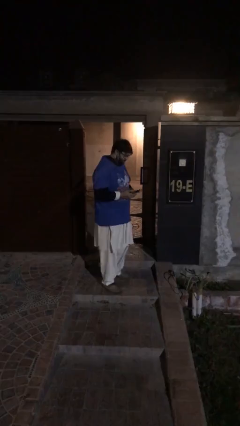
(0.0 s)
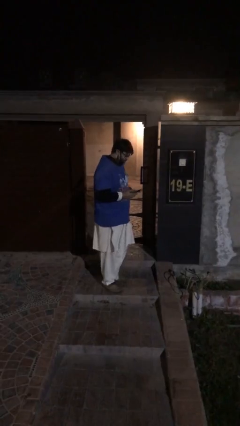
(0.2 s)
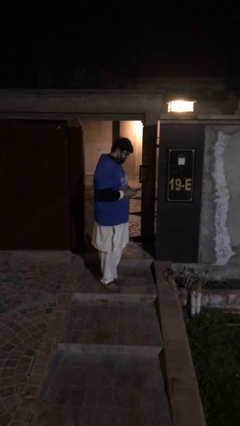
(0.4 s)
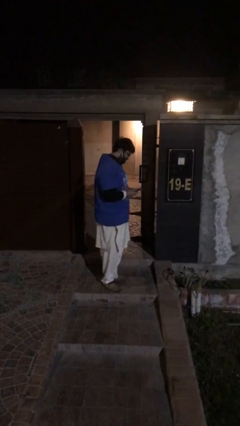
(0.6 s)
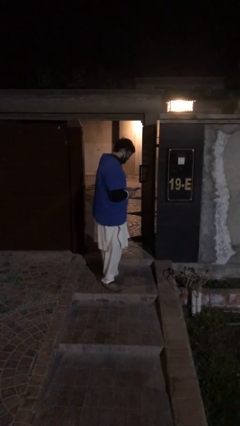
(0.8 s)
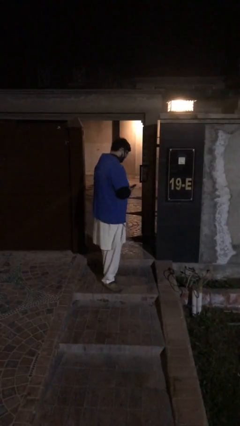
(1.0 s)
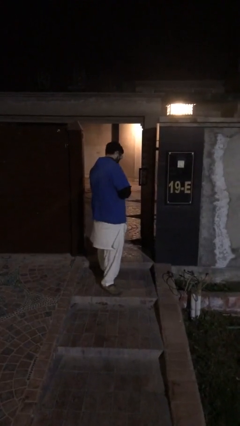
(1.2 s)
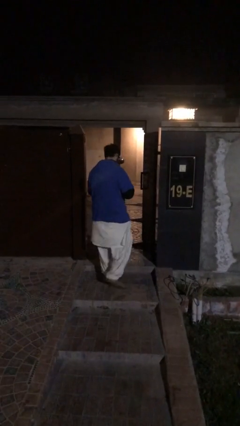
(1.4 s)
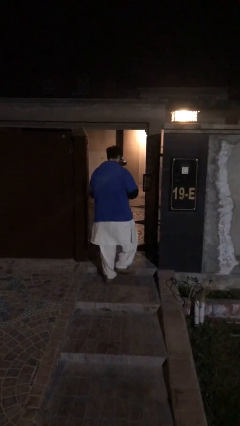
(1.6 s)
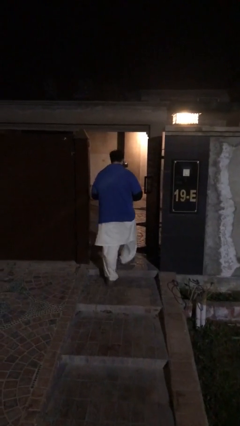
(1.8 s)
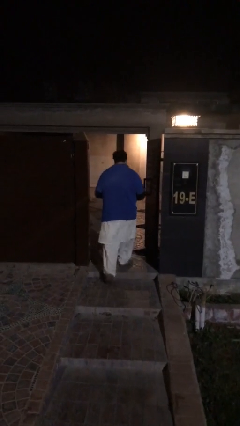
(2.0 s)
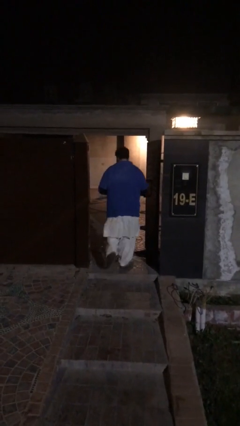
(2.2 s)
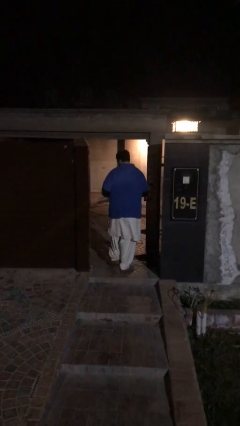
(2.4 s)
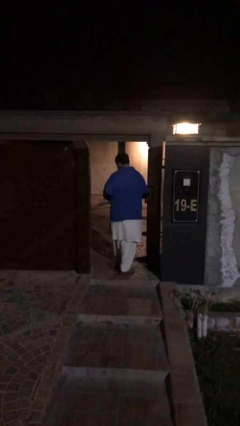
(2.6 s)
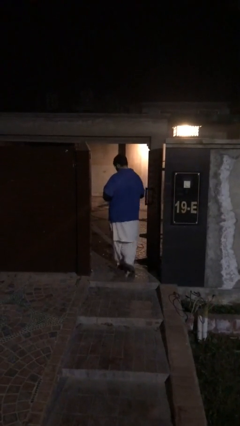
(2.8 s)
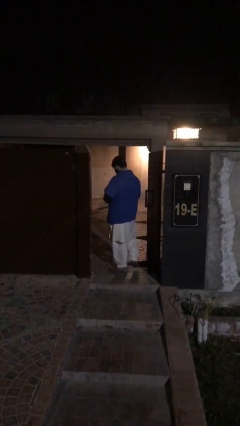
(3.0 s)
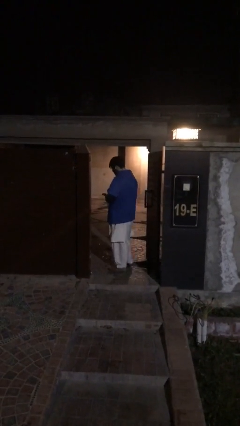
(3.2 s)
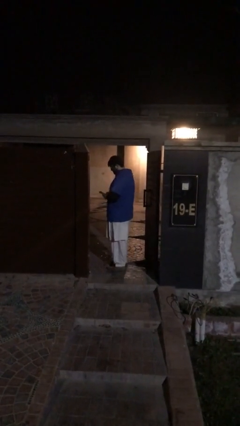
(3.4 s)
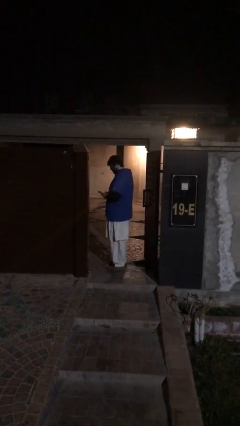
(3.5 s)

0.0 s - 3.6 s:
person exits scene through structure

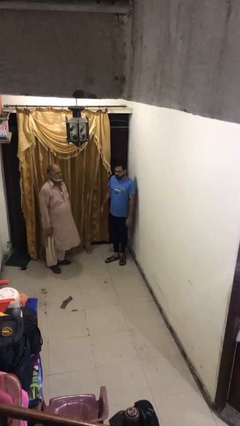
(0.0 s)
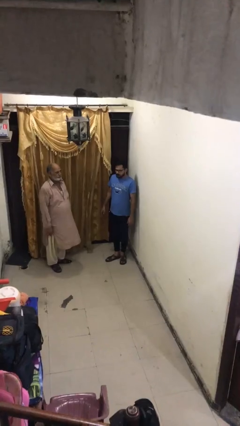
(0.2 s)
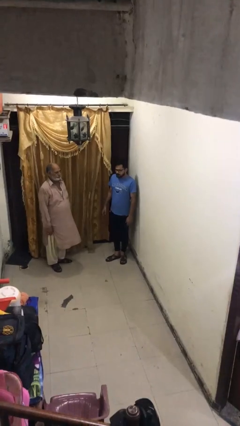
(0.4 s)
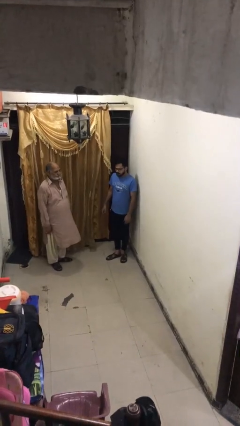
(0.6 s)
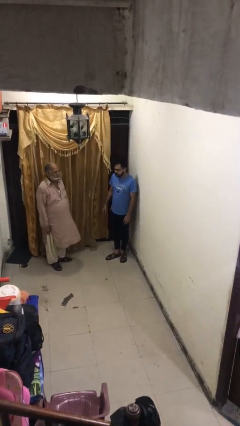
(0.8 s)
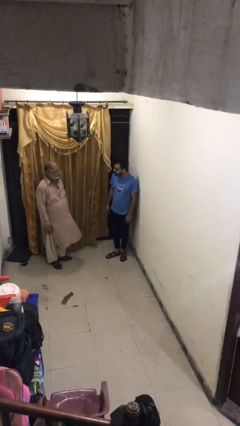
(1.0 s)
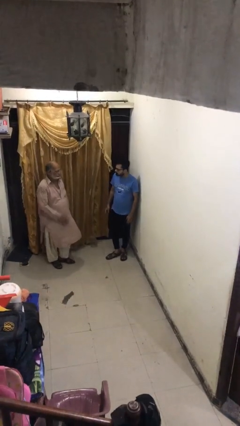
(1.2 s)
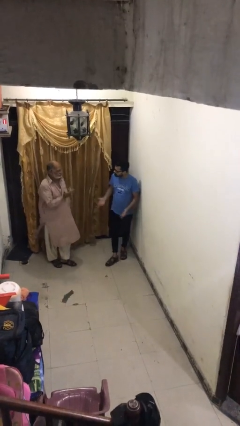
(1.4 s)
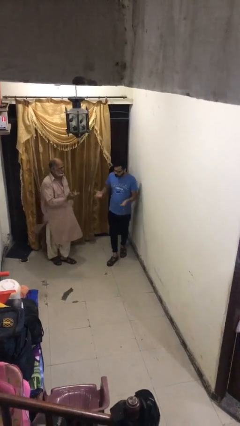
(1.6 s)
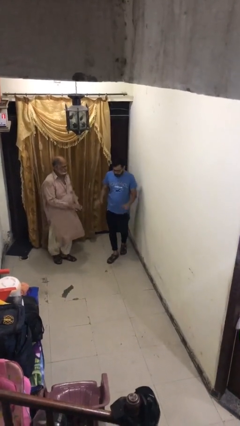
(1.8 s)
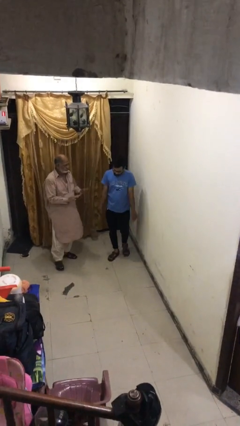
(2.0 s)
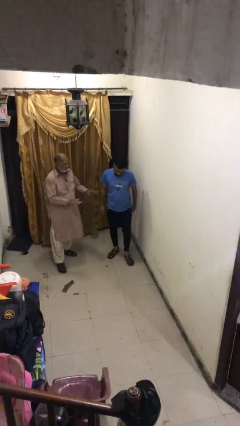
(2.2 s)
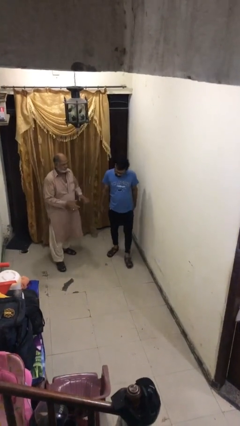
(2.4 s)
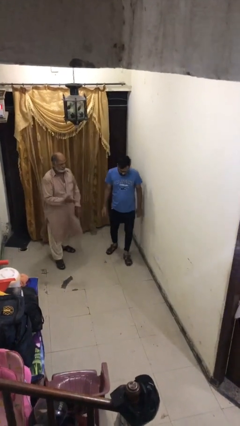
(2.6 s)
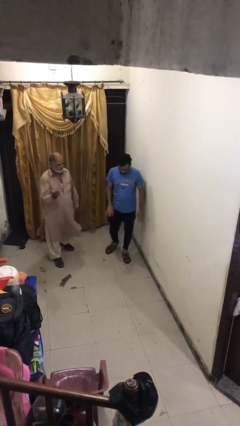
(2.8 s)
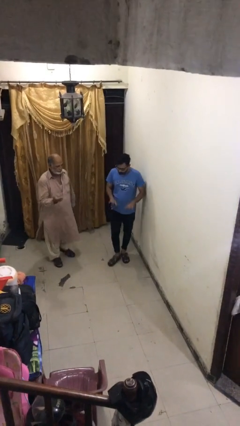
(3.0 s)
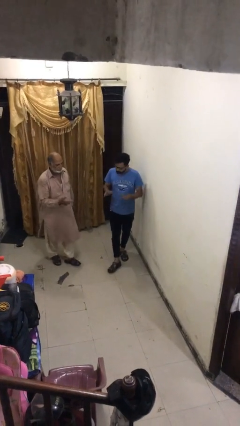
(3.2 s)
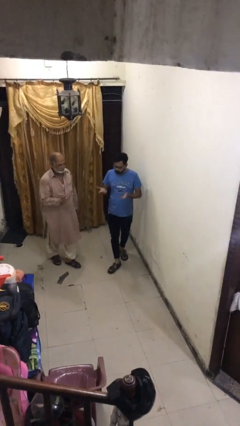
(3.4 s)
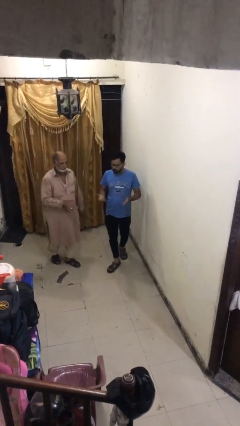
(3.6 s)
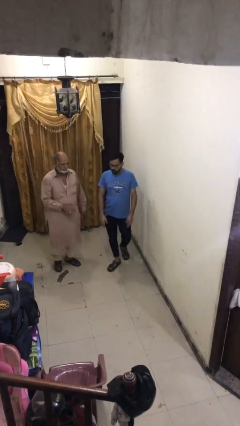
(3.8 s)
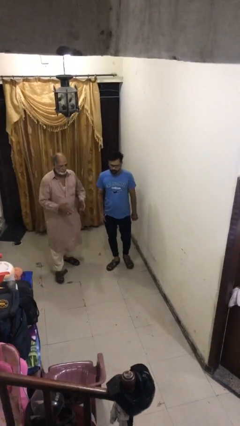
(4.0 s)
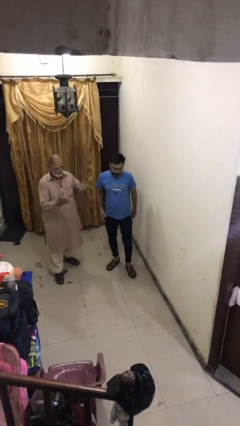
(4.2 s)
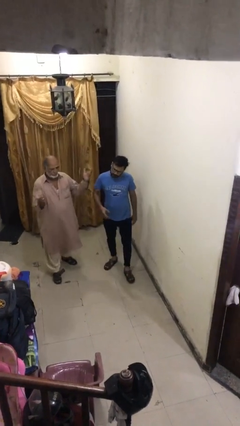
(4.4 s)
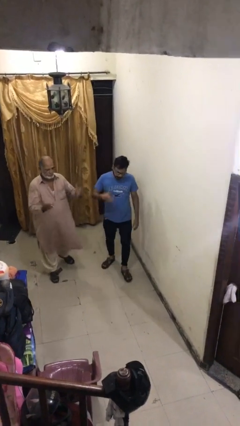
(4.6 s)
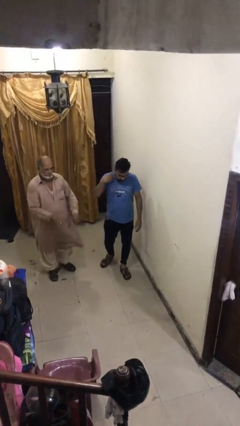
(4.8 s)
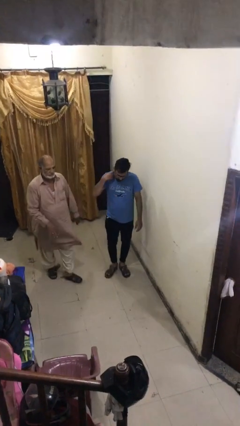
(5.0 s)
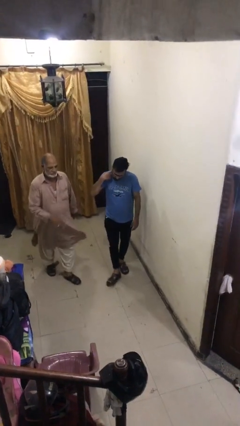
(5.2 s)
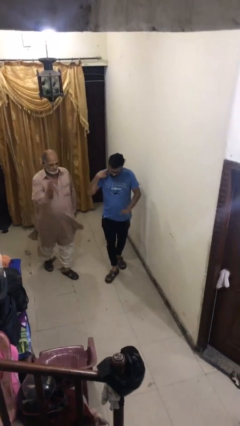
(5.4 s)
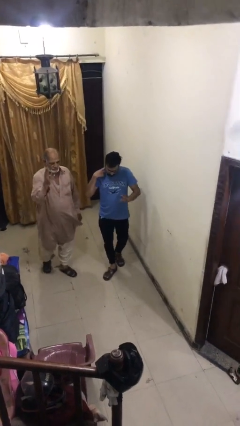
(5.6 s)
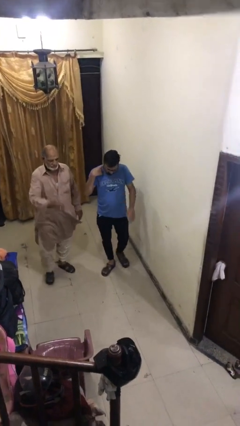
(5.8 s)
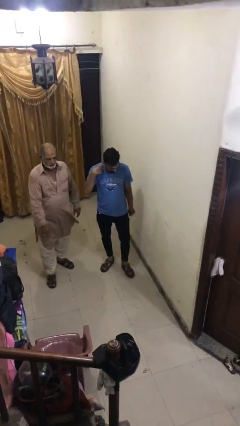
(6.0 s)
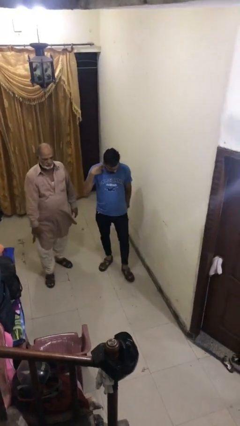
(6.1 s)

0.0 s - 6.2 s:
person talks to person

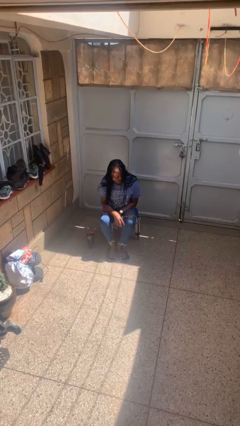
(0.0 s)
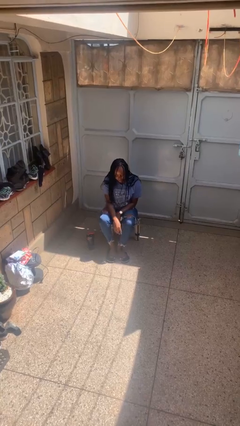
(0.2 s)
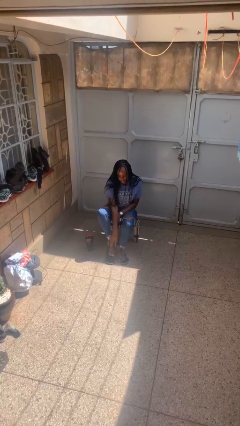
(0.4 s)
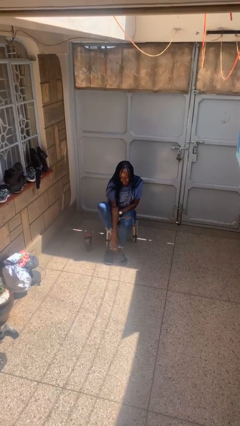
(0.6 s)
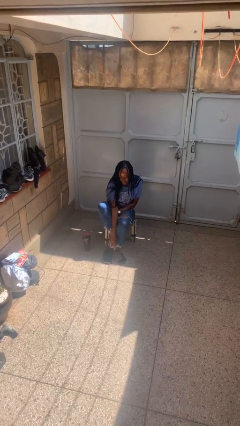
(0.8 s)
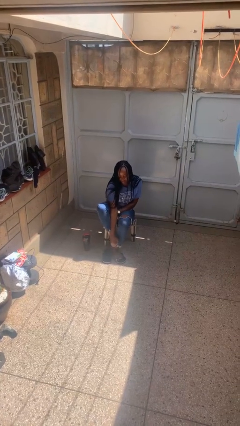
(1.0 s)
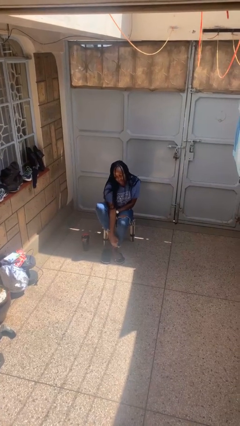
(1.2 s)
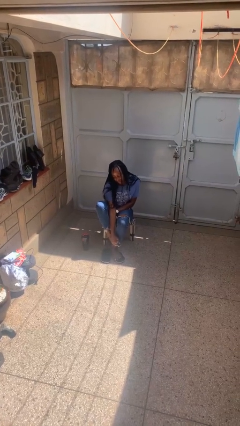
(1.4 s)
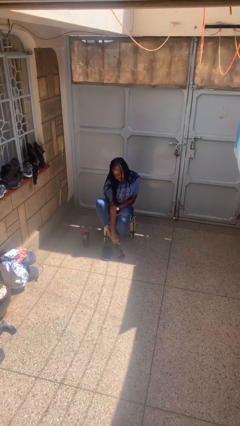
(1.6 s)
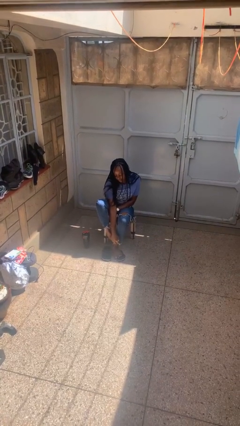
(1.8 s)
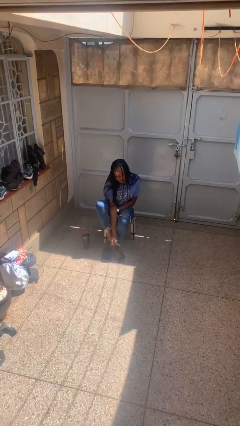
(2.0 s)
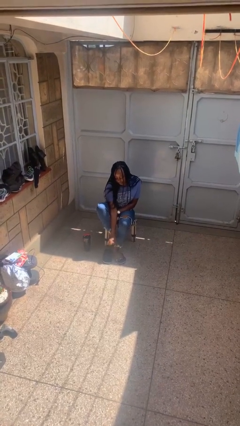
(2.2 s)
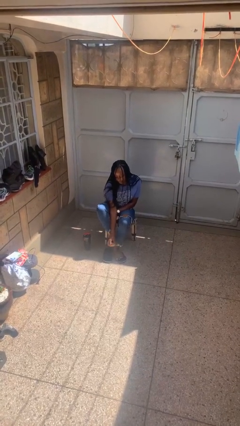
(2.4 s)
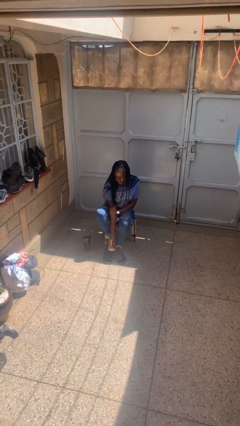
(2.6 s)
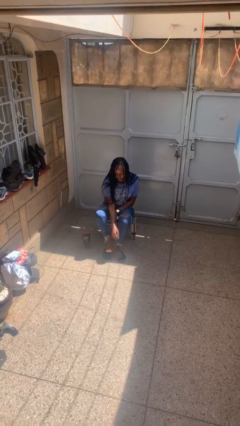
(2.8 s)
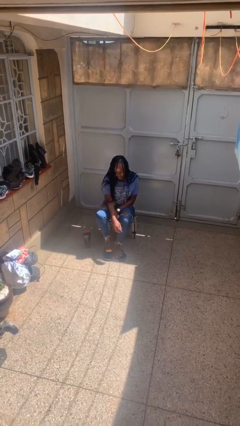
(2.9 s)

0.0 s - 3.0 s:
person rubs foot

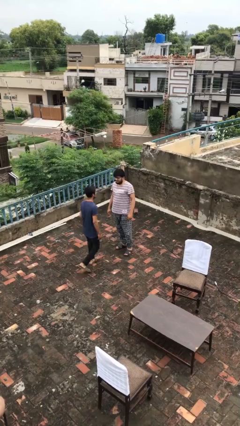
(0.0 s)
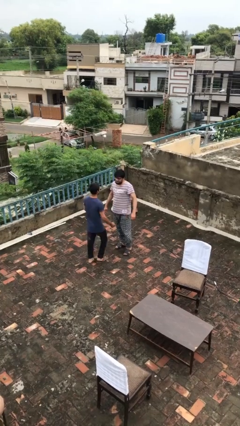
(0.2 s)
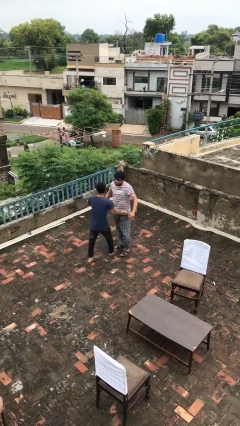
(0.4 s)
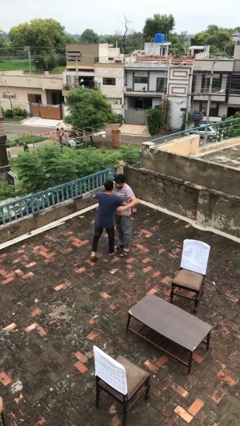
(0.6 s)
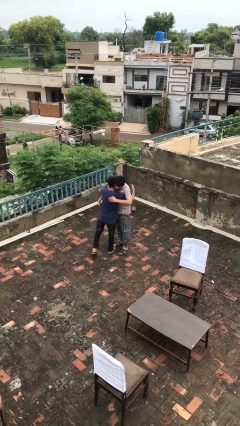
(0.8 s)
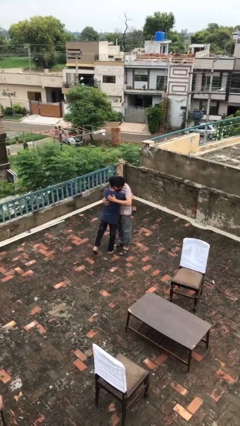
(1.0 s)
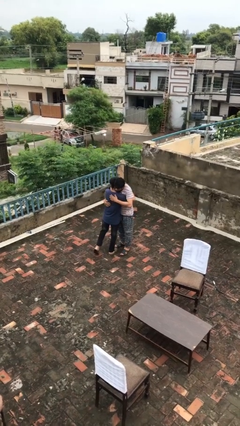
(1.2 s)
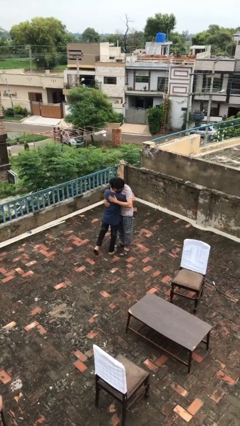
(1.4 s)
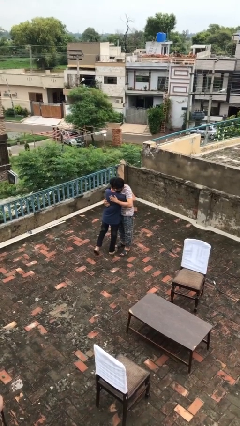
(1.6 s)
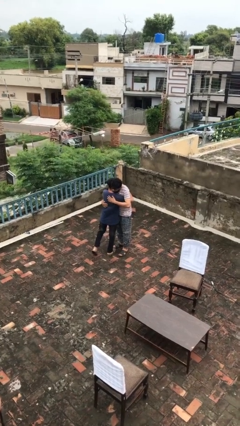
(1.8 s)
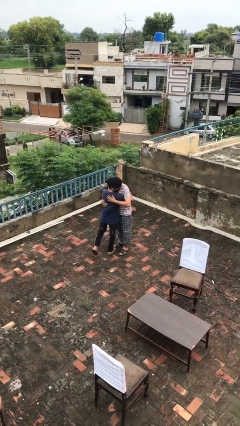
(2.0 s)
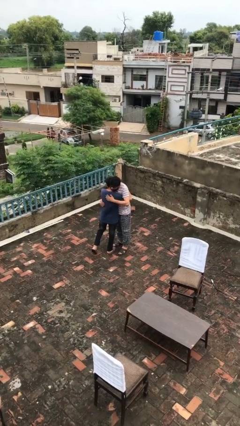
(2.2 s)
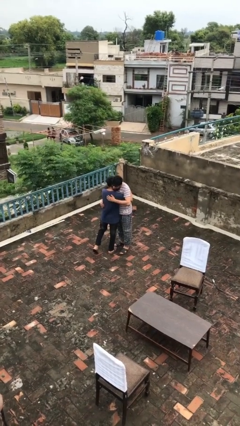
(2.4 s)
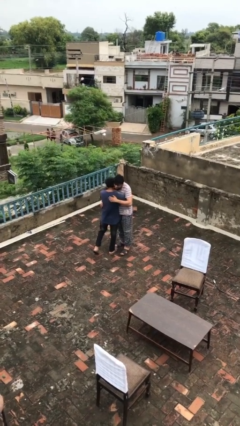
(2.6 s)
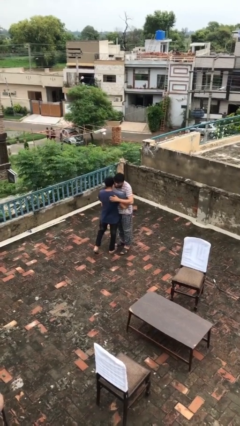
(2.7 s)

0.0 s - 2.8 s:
person embraces person

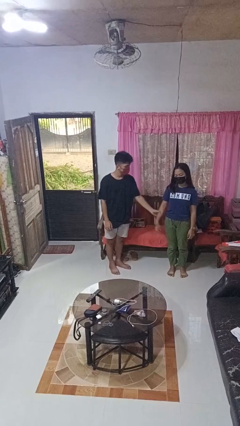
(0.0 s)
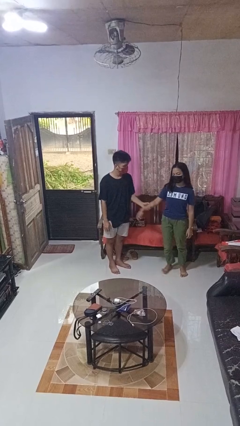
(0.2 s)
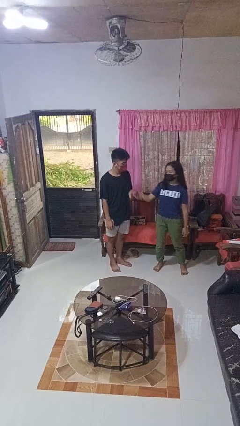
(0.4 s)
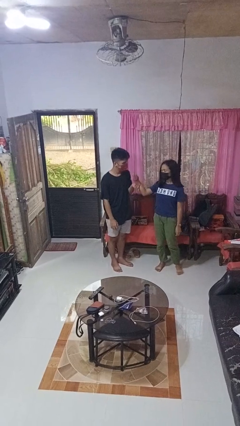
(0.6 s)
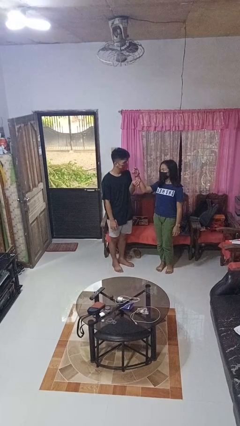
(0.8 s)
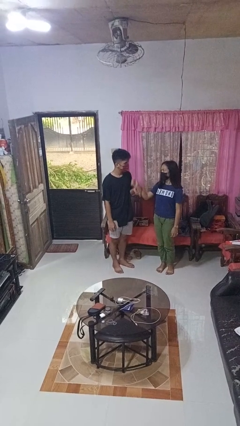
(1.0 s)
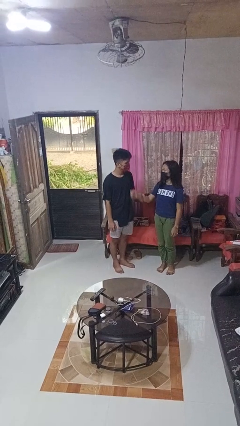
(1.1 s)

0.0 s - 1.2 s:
person grabs person by forearm

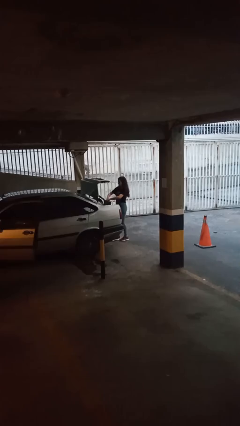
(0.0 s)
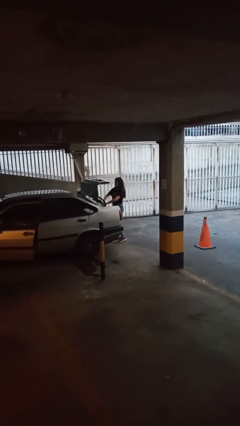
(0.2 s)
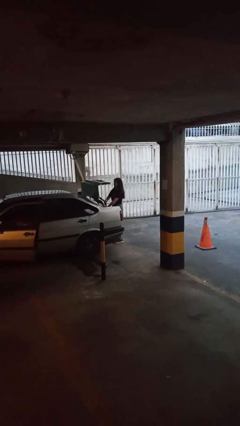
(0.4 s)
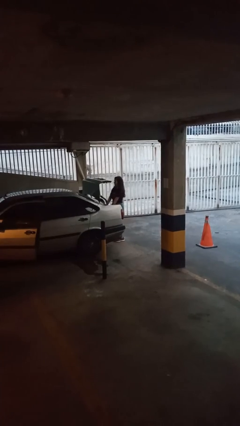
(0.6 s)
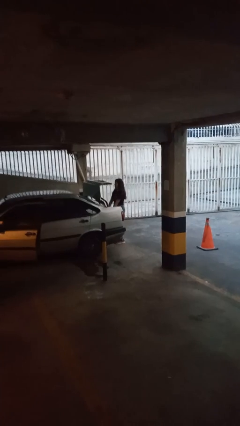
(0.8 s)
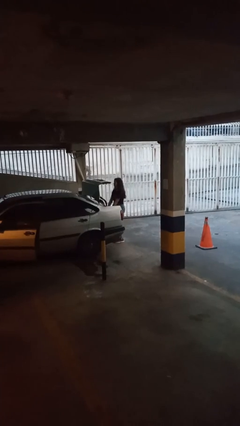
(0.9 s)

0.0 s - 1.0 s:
person loads car
